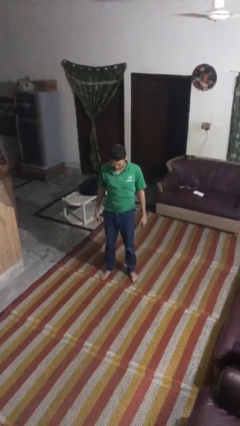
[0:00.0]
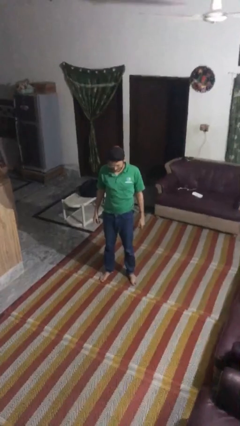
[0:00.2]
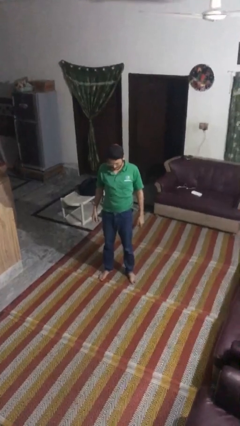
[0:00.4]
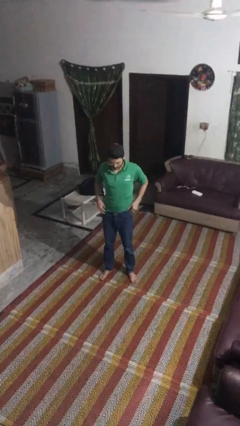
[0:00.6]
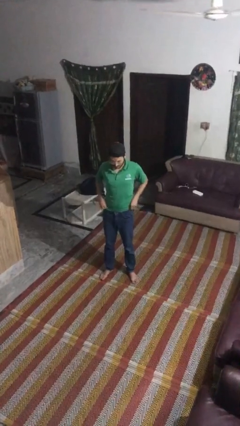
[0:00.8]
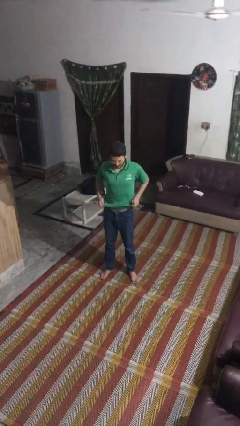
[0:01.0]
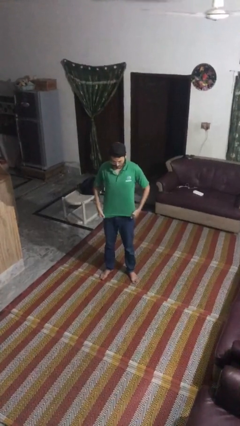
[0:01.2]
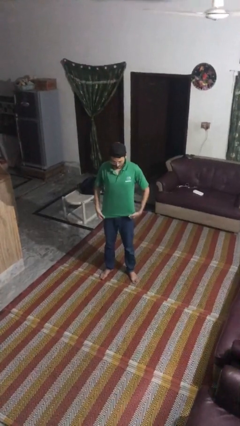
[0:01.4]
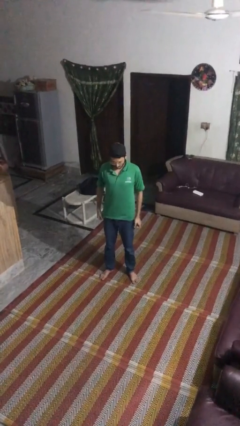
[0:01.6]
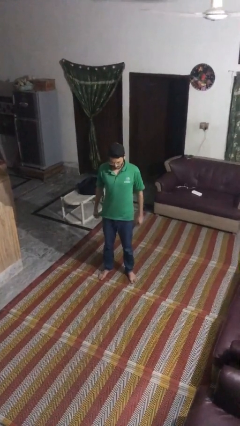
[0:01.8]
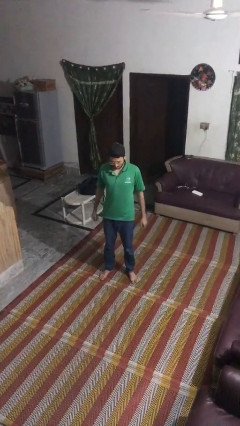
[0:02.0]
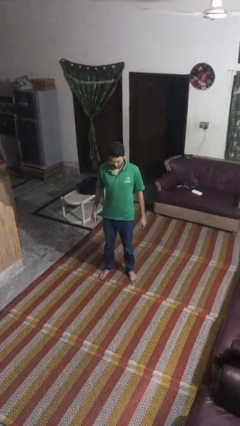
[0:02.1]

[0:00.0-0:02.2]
person untucks shirt

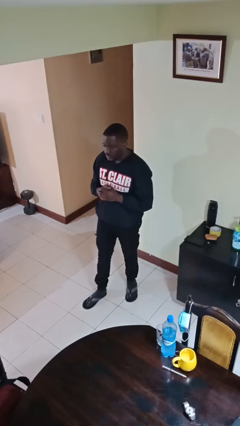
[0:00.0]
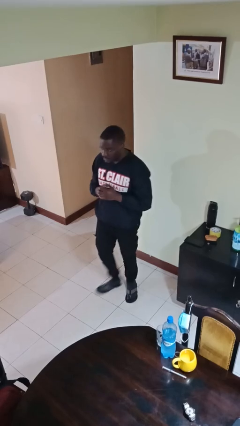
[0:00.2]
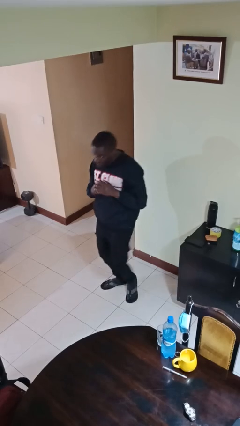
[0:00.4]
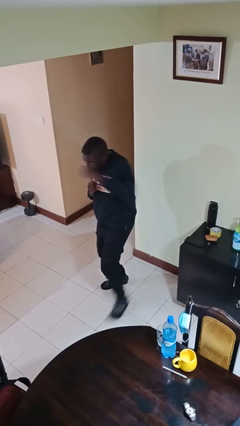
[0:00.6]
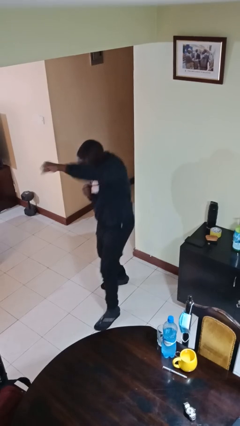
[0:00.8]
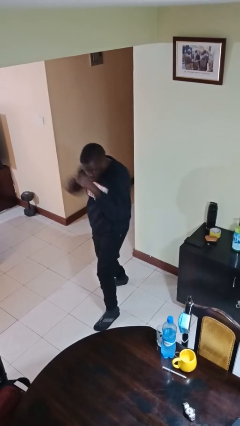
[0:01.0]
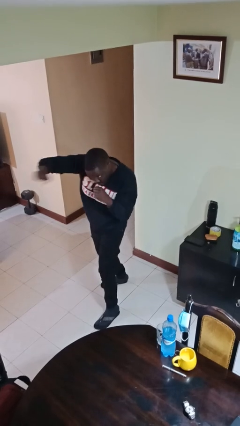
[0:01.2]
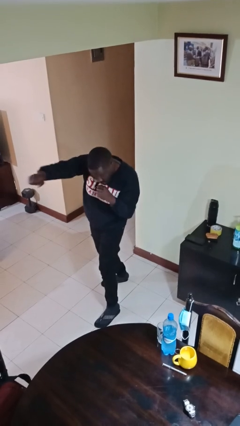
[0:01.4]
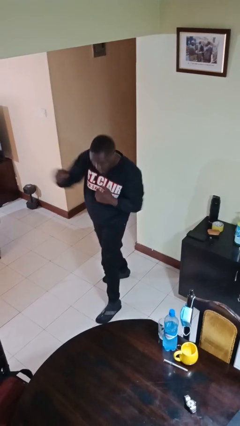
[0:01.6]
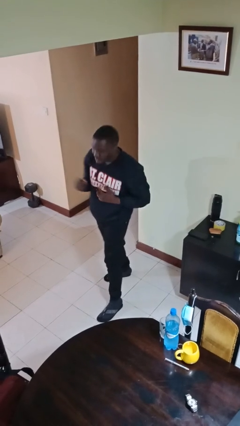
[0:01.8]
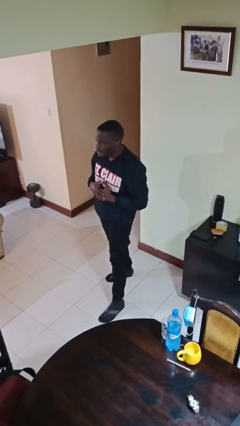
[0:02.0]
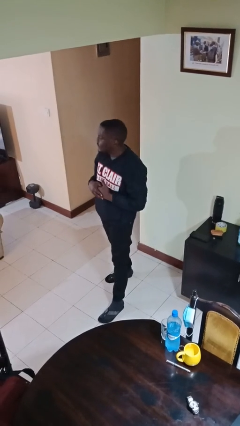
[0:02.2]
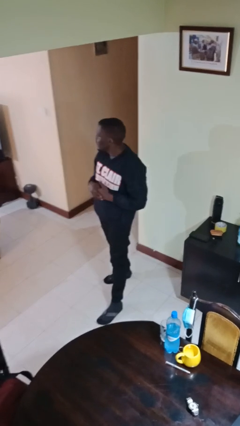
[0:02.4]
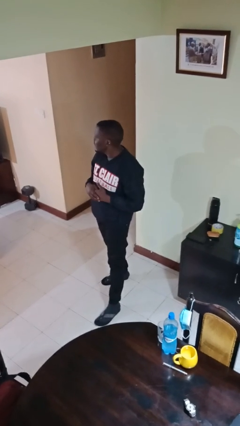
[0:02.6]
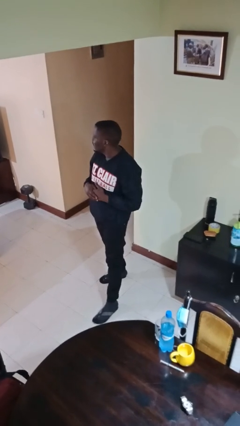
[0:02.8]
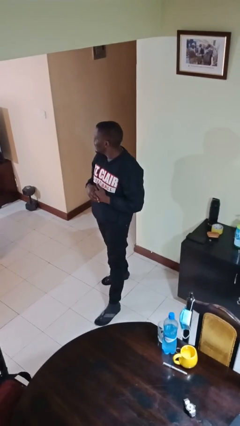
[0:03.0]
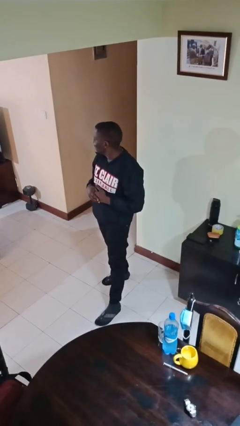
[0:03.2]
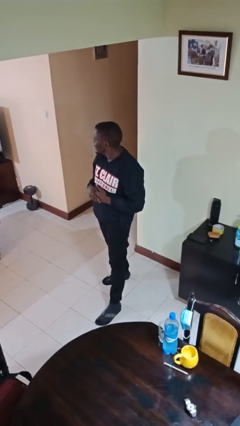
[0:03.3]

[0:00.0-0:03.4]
person punches

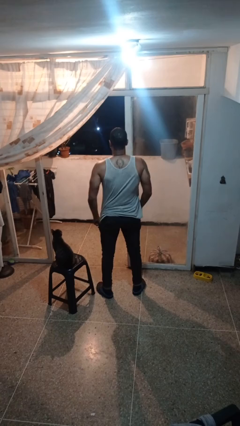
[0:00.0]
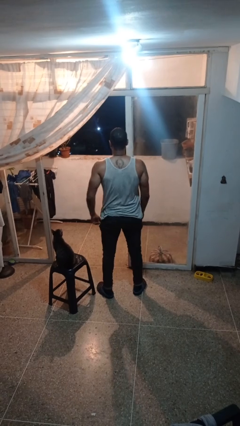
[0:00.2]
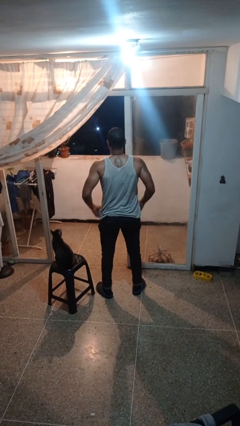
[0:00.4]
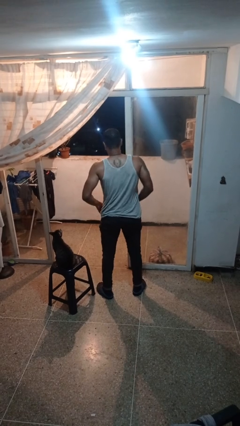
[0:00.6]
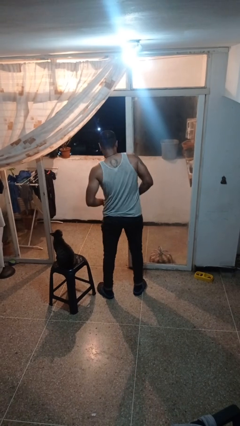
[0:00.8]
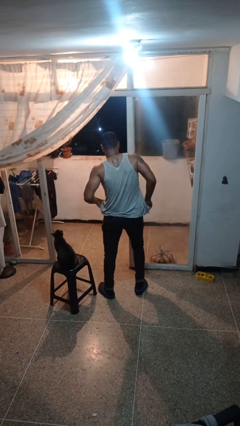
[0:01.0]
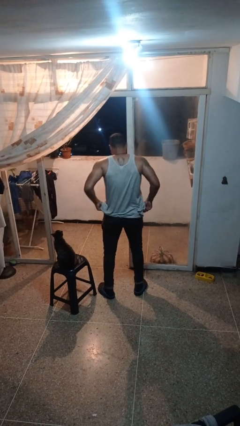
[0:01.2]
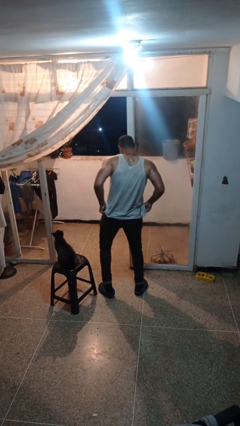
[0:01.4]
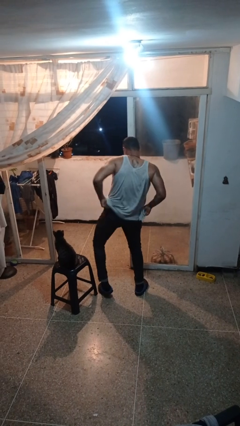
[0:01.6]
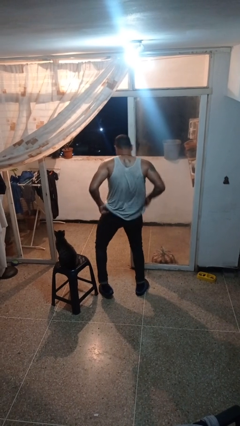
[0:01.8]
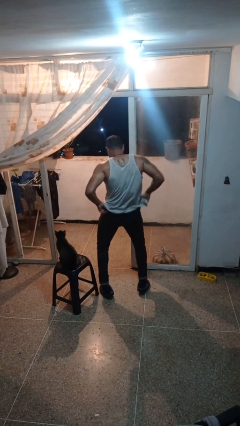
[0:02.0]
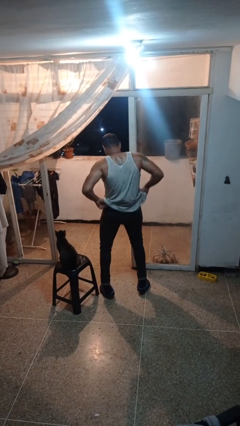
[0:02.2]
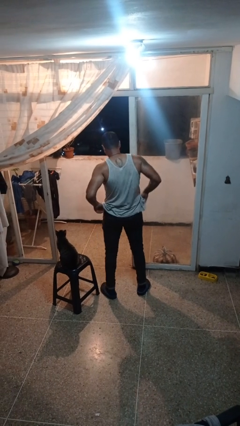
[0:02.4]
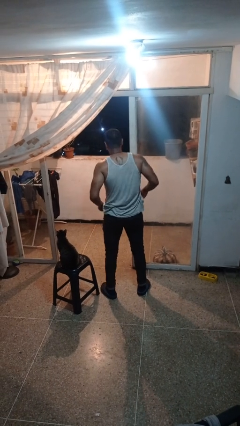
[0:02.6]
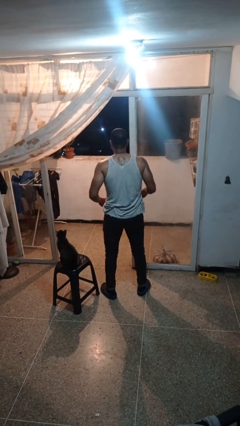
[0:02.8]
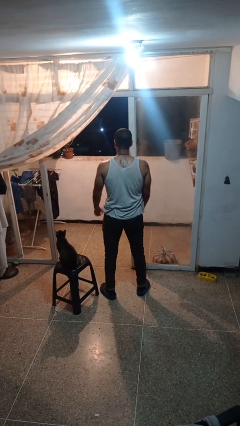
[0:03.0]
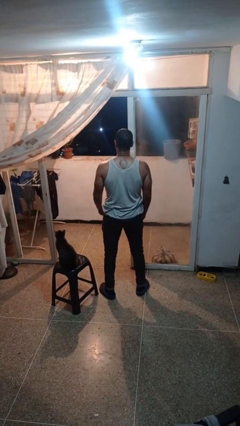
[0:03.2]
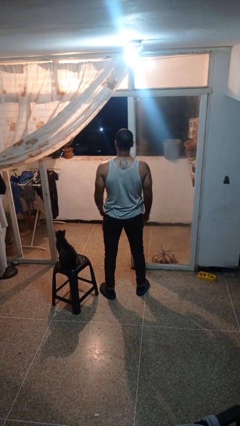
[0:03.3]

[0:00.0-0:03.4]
person hikes up pants

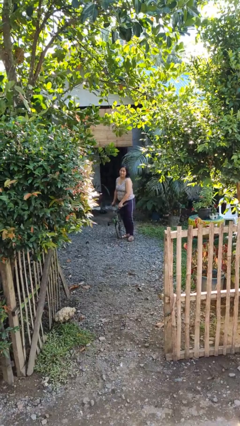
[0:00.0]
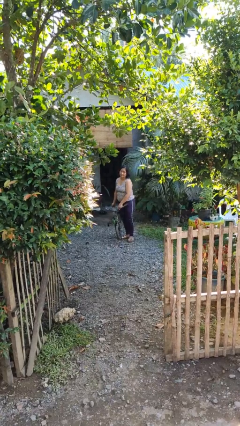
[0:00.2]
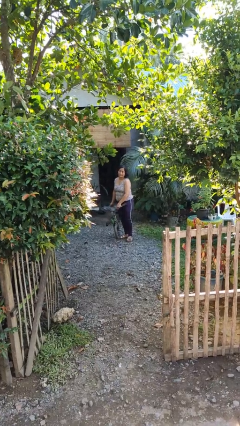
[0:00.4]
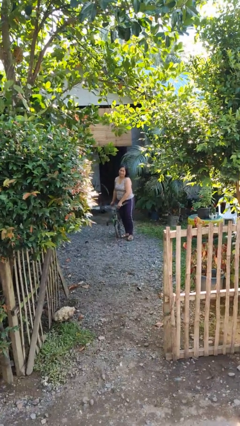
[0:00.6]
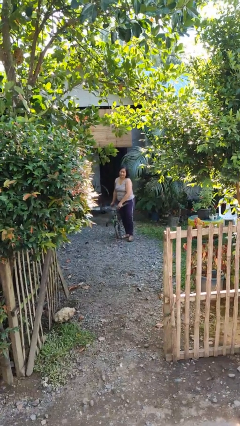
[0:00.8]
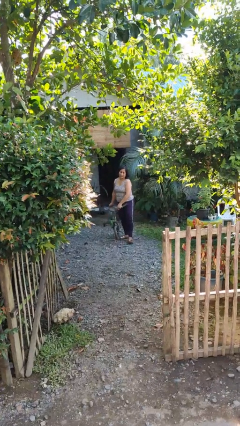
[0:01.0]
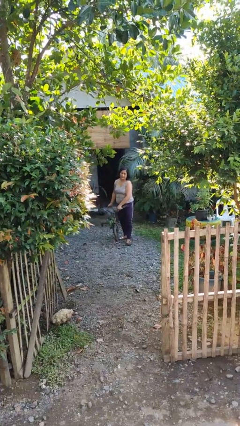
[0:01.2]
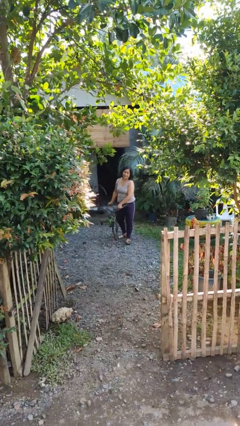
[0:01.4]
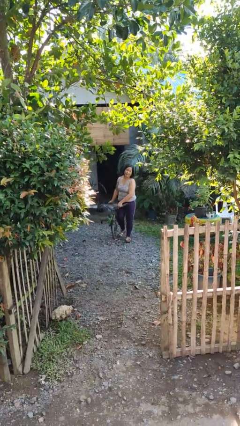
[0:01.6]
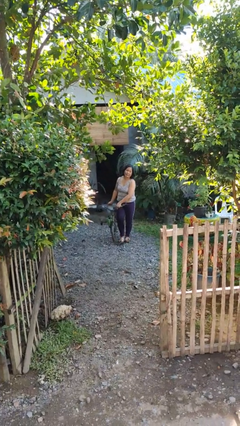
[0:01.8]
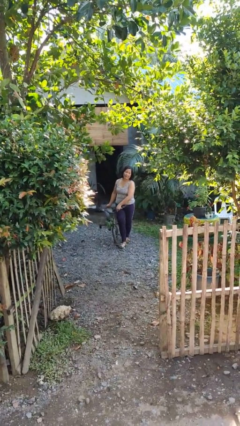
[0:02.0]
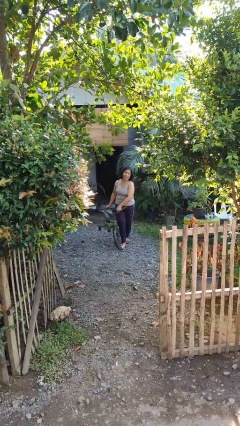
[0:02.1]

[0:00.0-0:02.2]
person carries bicycle

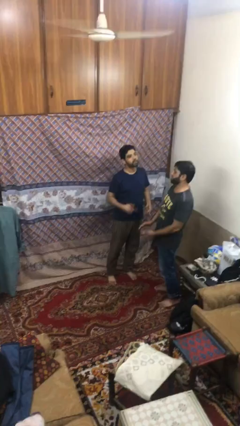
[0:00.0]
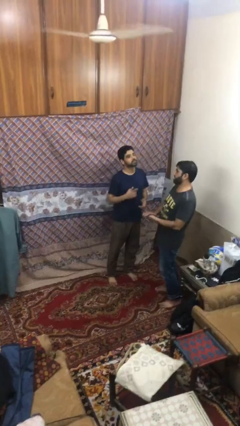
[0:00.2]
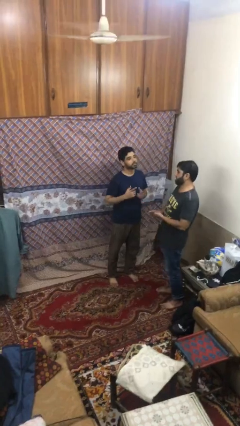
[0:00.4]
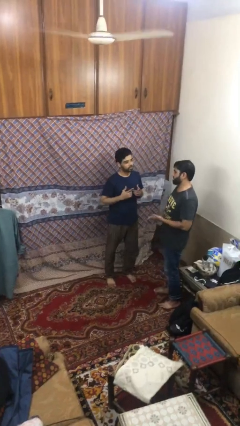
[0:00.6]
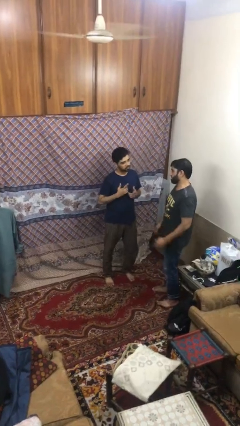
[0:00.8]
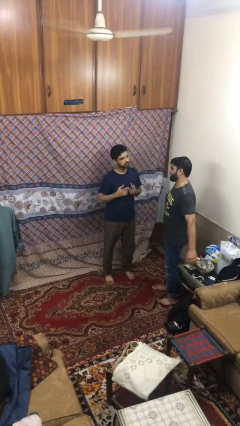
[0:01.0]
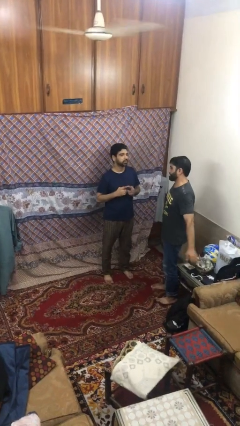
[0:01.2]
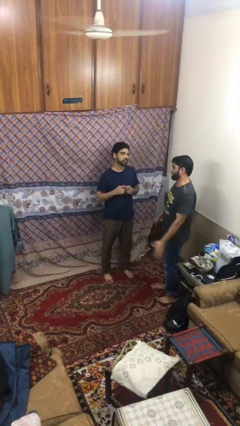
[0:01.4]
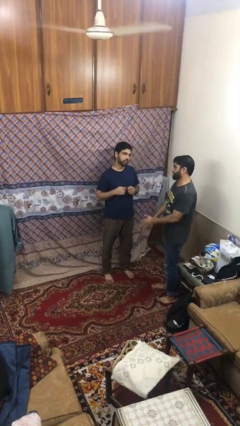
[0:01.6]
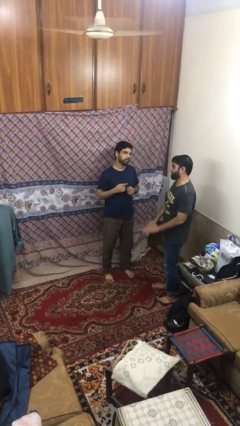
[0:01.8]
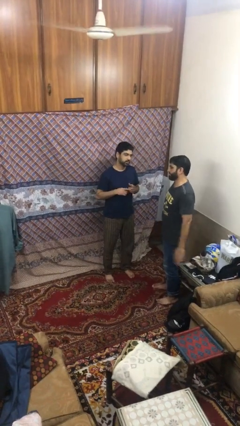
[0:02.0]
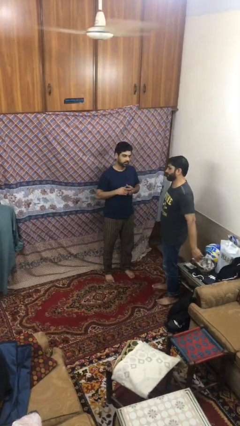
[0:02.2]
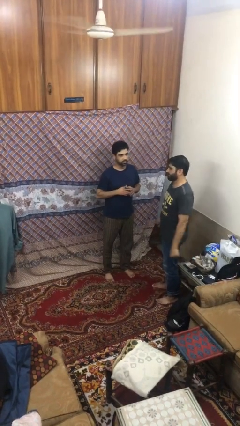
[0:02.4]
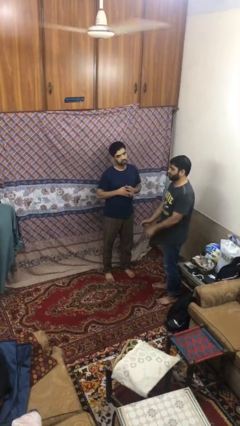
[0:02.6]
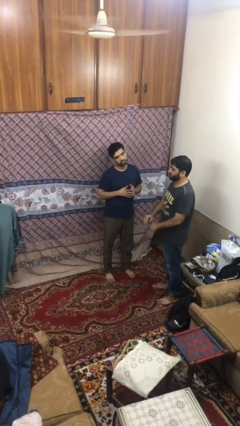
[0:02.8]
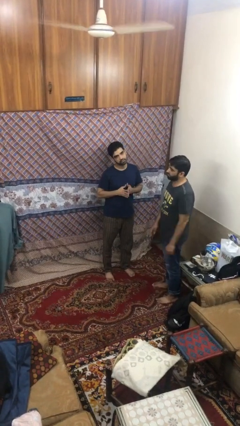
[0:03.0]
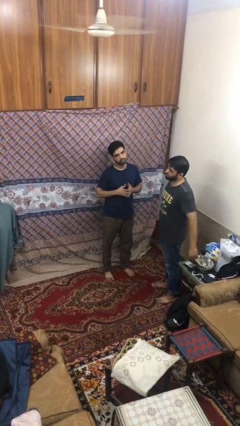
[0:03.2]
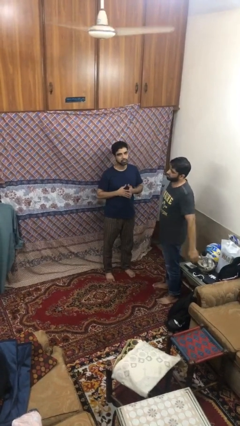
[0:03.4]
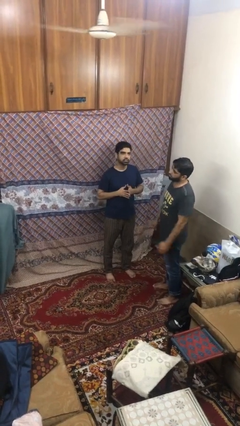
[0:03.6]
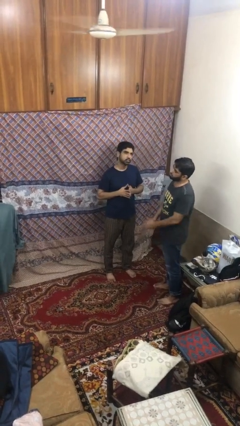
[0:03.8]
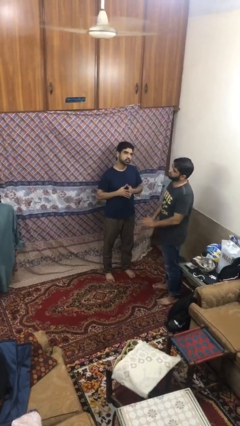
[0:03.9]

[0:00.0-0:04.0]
person talks to person

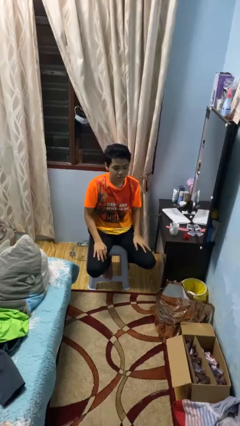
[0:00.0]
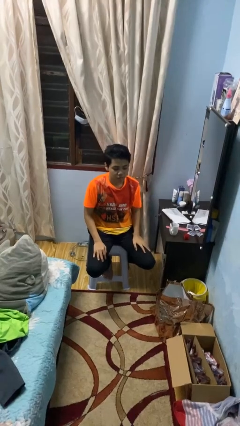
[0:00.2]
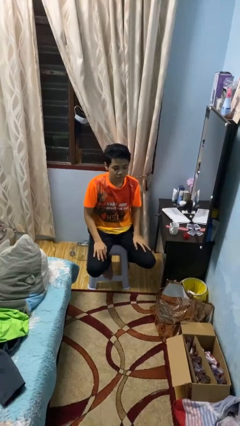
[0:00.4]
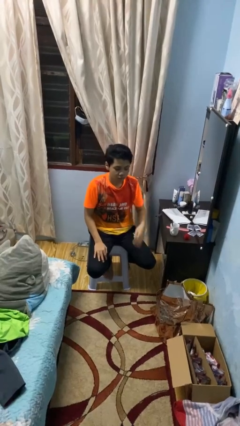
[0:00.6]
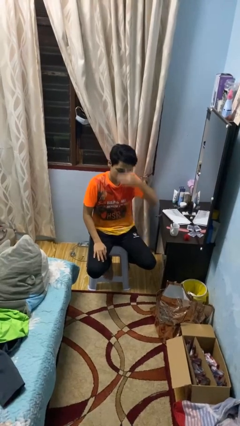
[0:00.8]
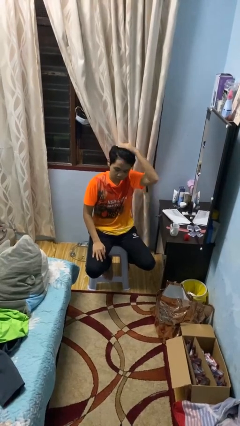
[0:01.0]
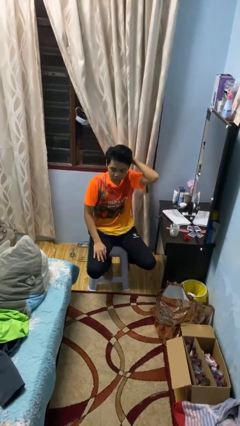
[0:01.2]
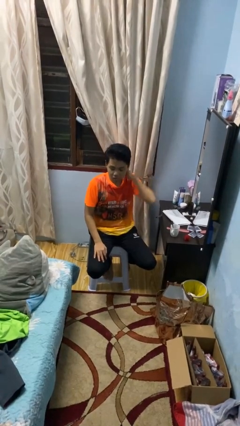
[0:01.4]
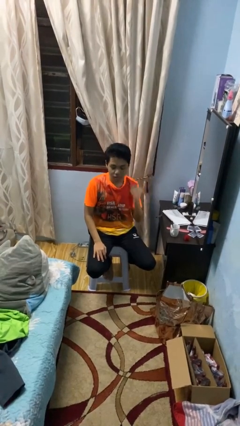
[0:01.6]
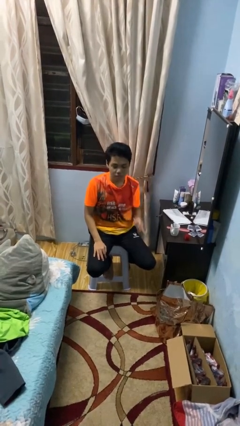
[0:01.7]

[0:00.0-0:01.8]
person strokes hair

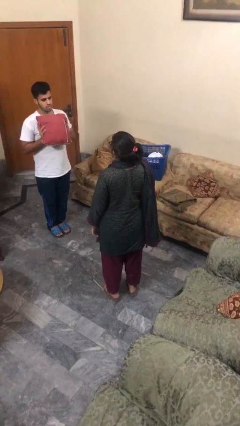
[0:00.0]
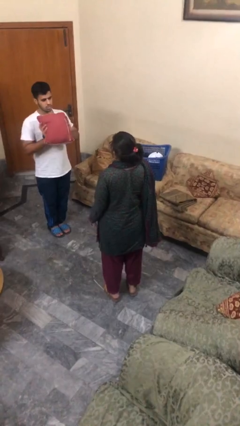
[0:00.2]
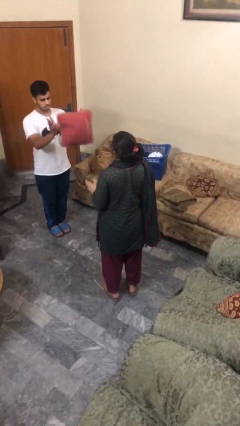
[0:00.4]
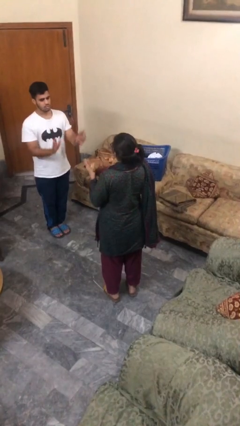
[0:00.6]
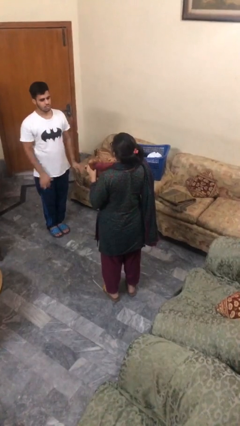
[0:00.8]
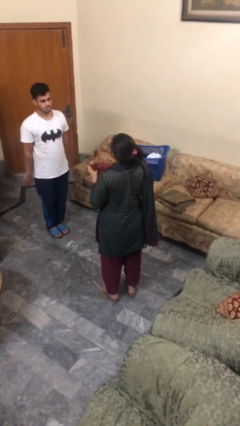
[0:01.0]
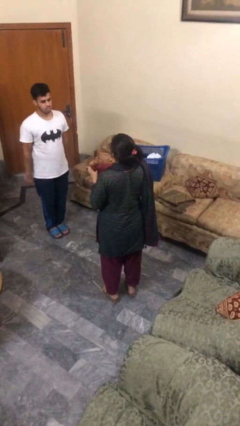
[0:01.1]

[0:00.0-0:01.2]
person catches object from person
